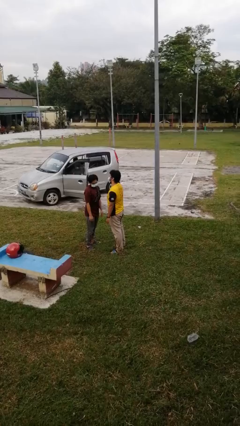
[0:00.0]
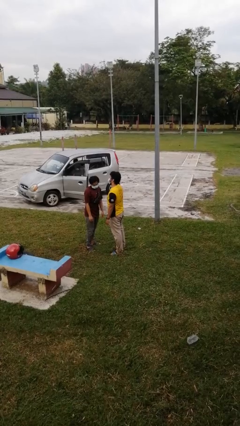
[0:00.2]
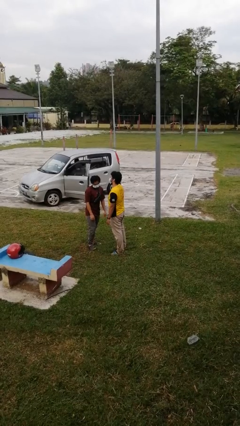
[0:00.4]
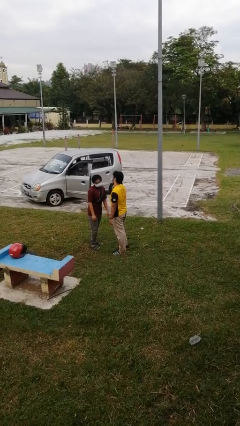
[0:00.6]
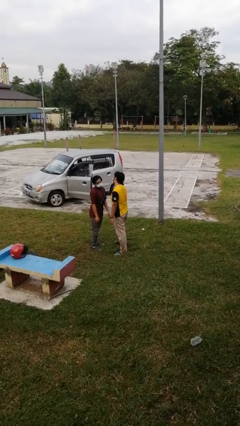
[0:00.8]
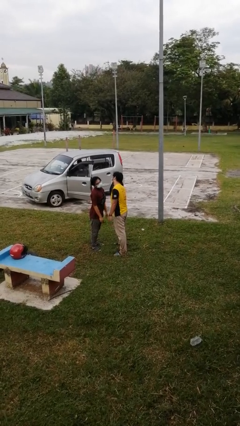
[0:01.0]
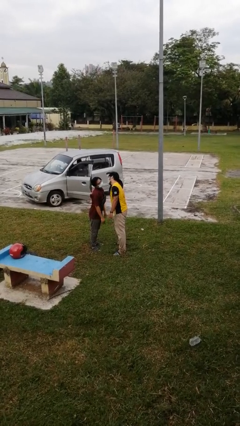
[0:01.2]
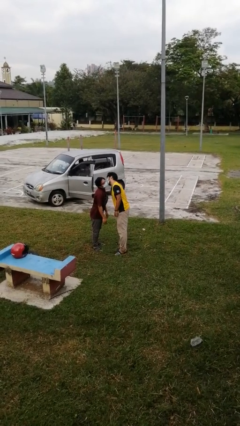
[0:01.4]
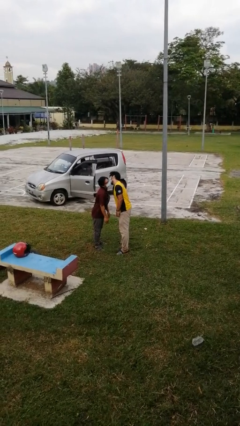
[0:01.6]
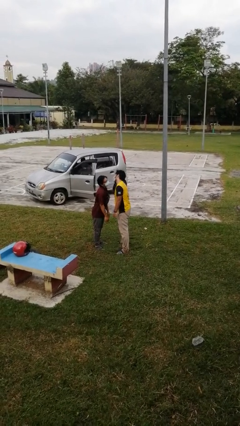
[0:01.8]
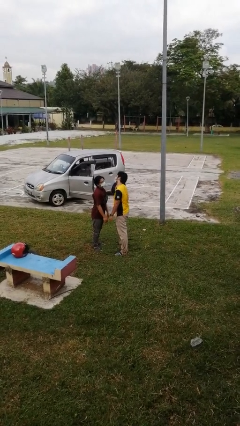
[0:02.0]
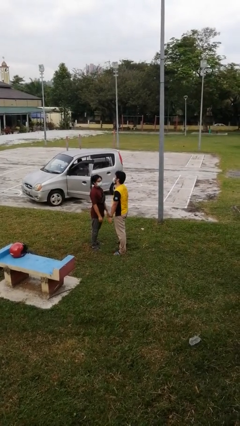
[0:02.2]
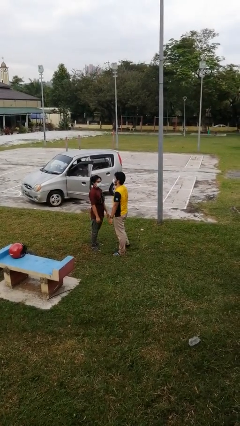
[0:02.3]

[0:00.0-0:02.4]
person kisses cheek of person

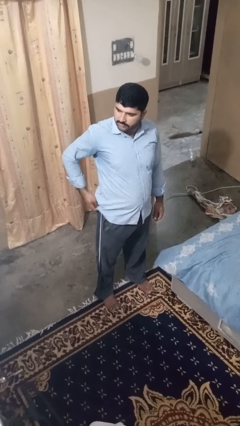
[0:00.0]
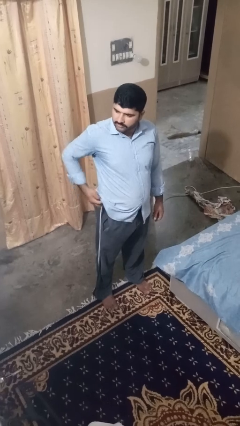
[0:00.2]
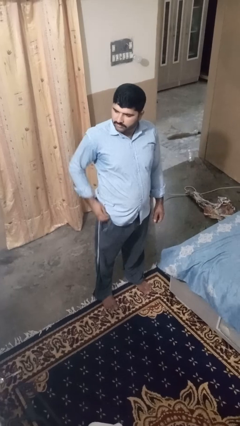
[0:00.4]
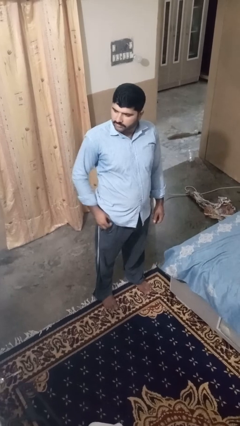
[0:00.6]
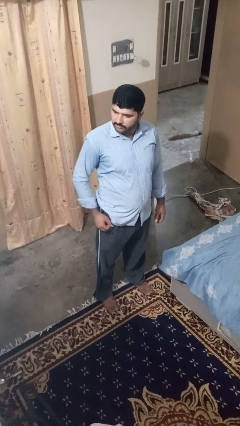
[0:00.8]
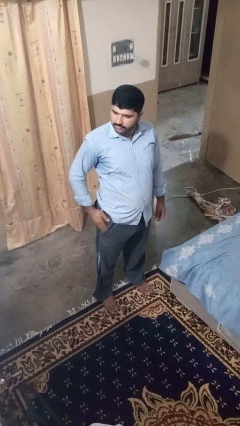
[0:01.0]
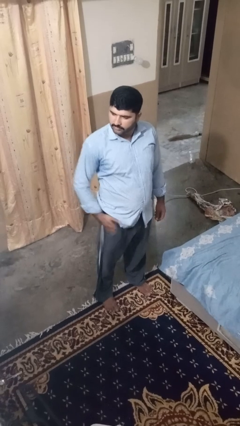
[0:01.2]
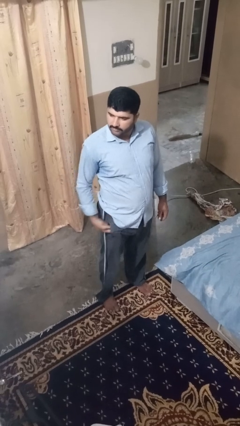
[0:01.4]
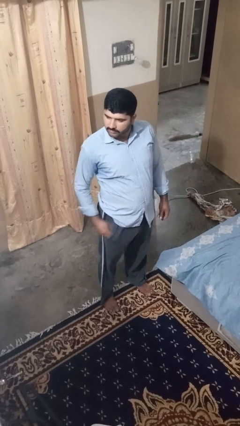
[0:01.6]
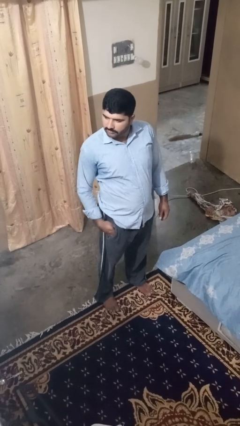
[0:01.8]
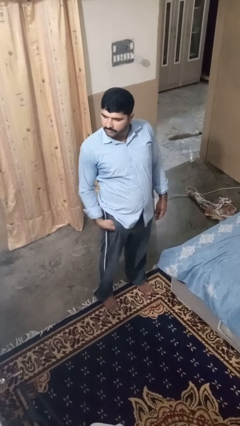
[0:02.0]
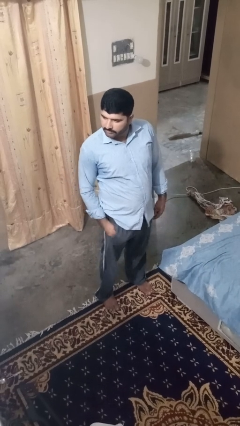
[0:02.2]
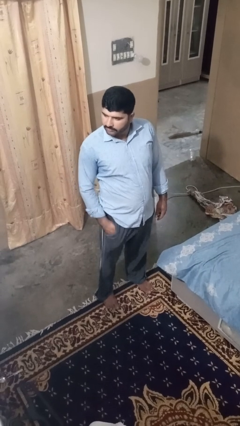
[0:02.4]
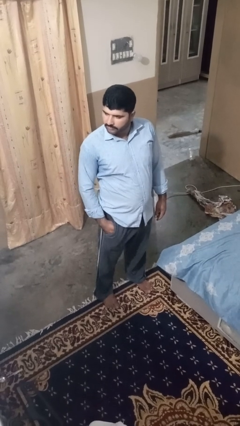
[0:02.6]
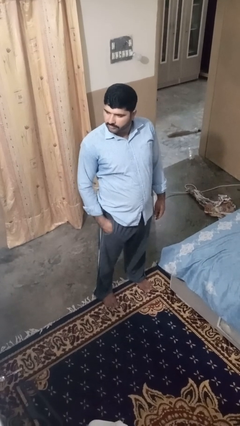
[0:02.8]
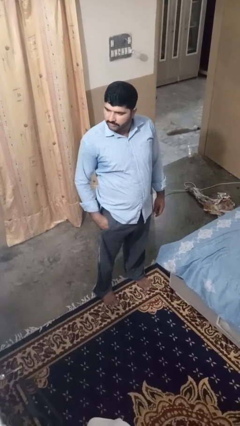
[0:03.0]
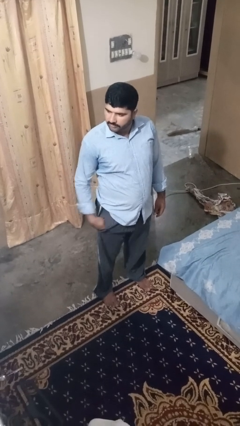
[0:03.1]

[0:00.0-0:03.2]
person puts hands in back pockets

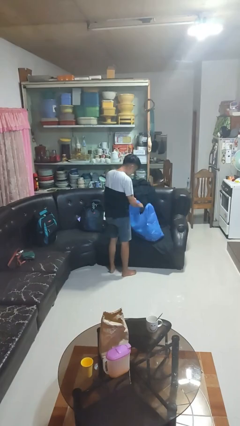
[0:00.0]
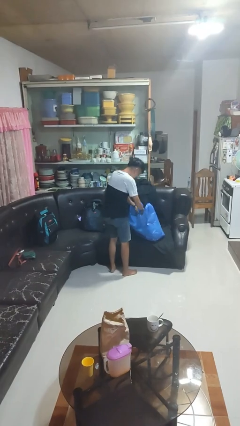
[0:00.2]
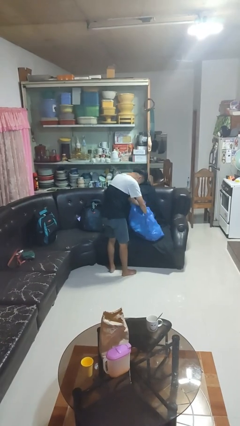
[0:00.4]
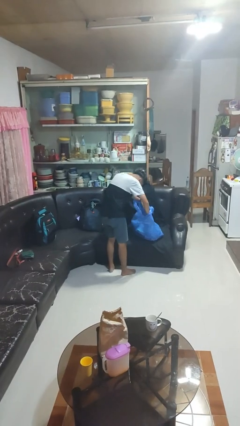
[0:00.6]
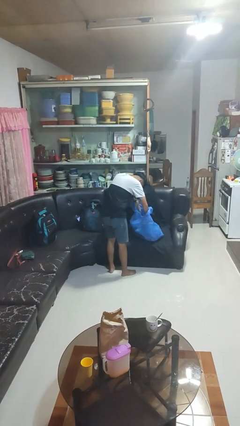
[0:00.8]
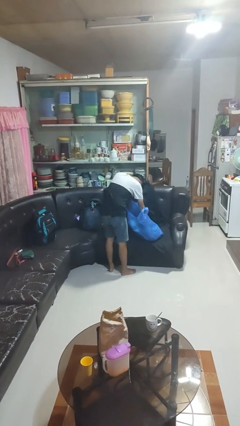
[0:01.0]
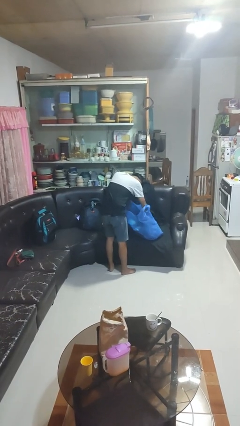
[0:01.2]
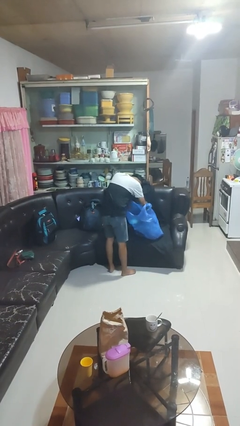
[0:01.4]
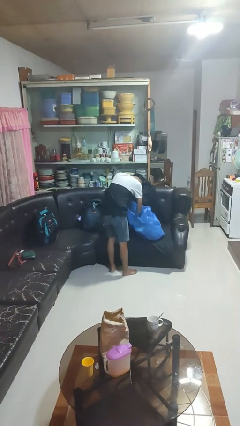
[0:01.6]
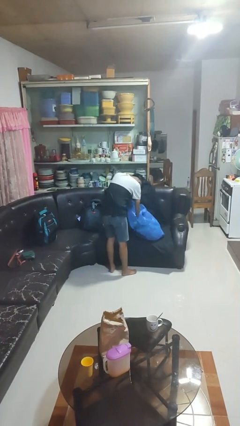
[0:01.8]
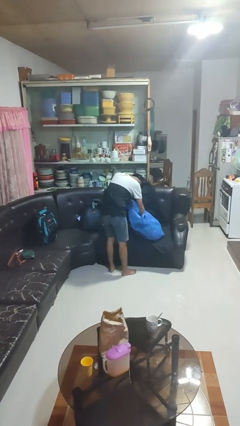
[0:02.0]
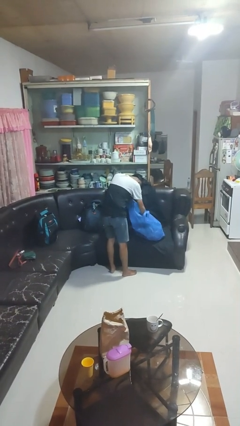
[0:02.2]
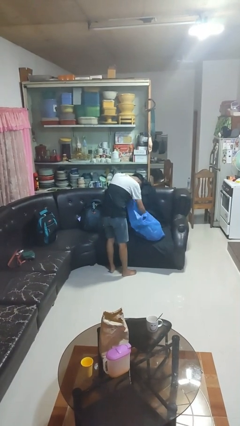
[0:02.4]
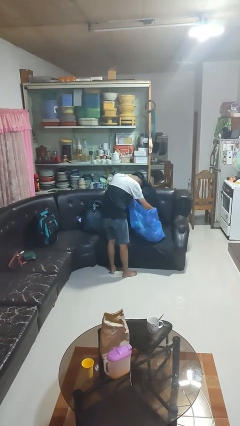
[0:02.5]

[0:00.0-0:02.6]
person searches in bag

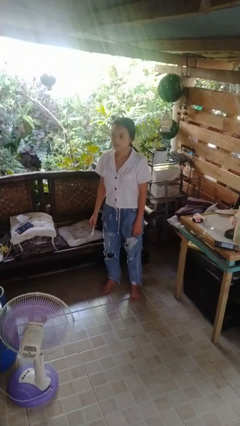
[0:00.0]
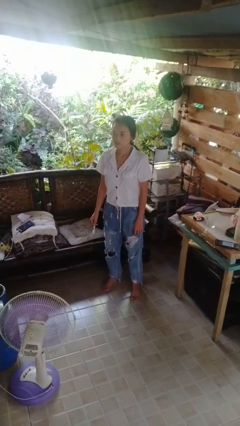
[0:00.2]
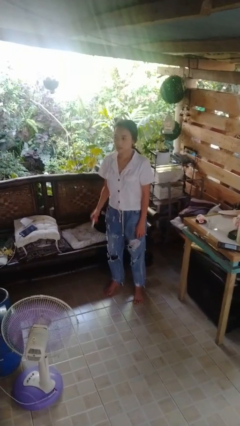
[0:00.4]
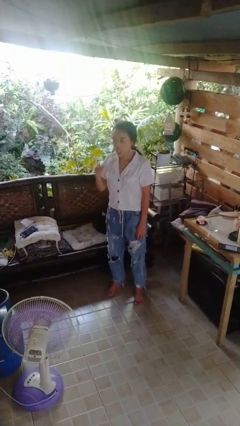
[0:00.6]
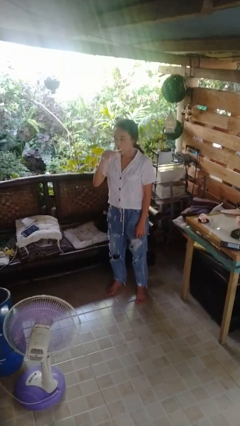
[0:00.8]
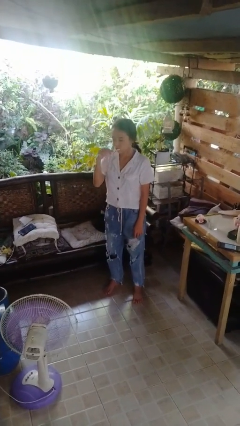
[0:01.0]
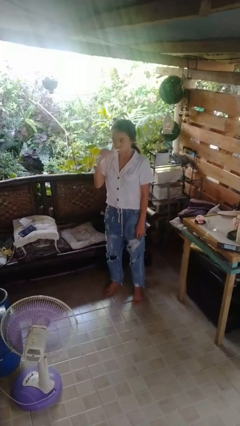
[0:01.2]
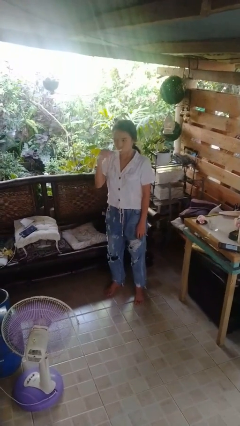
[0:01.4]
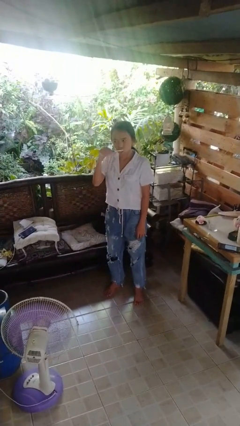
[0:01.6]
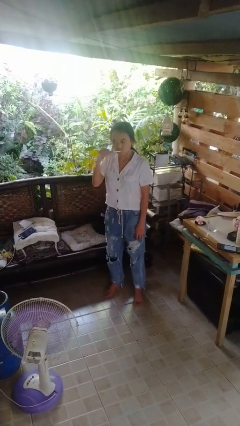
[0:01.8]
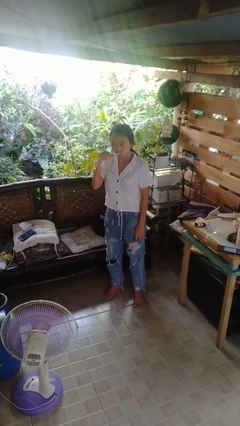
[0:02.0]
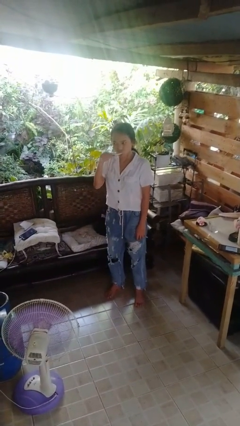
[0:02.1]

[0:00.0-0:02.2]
person brushes teeth

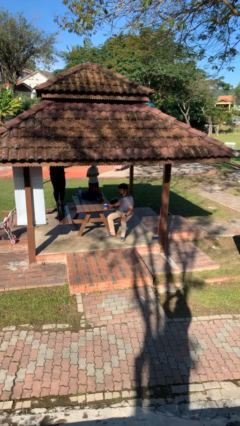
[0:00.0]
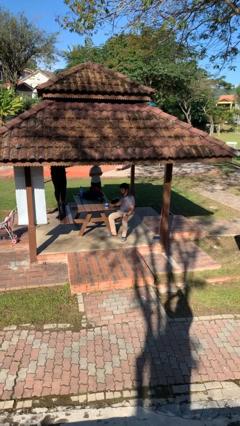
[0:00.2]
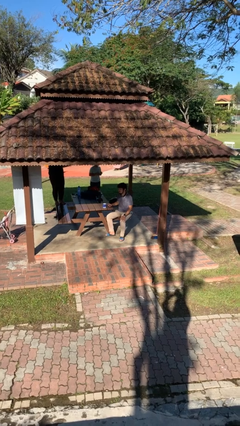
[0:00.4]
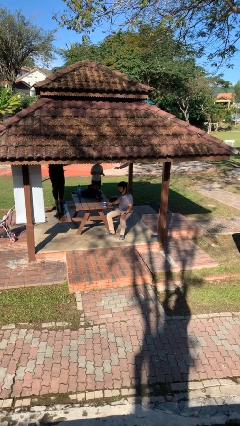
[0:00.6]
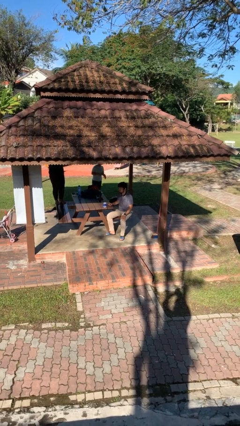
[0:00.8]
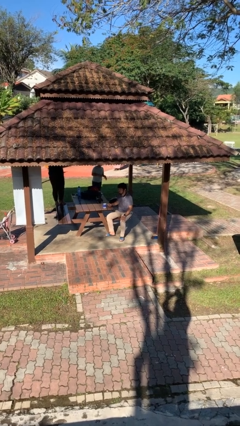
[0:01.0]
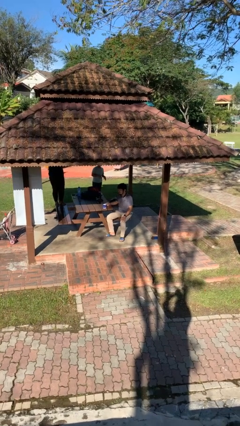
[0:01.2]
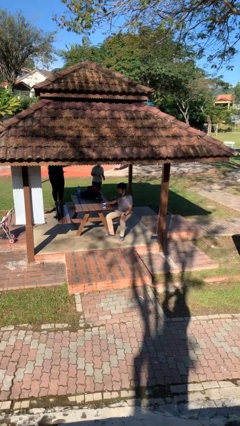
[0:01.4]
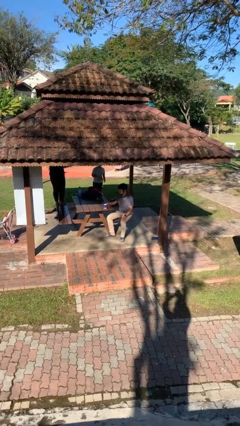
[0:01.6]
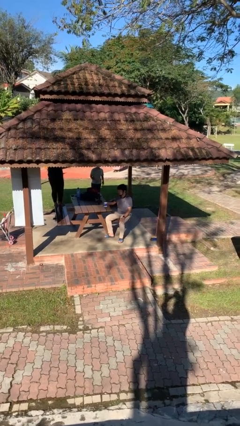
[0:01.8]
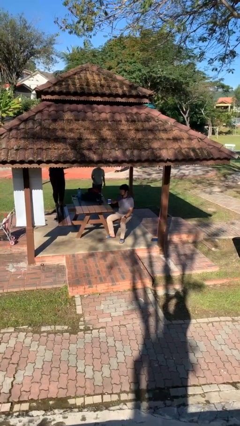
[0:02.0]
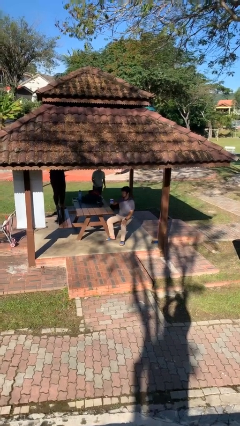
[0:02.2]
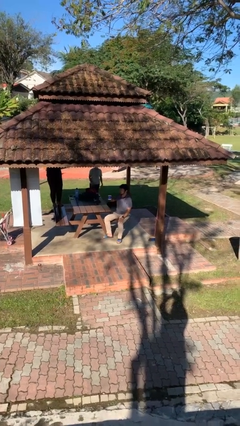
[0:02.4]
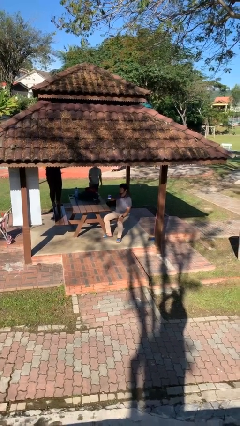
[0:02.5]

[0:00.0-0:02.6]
person picks up object from table

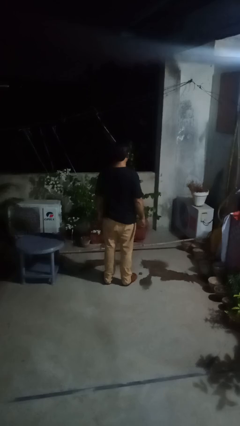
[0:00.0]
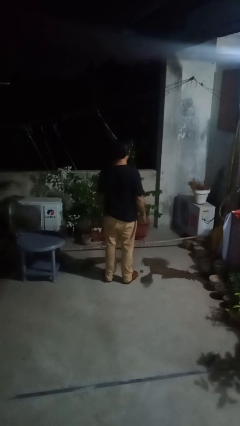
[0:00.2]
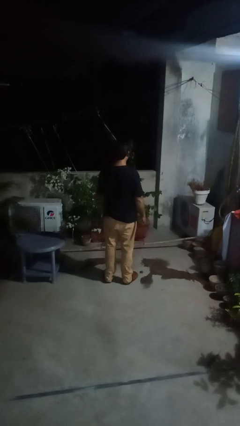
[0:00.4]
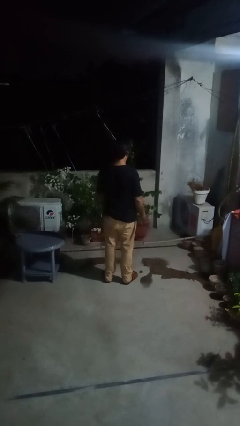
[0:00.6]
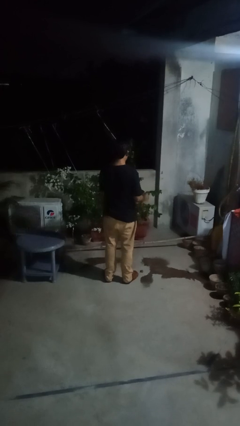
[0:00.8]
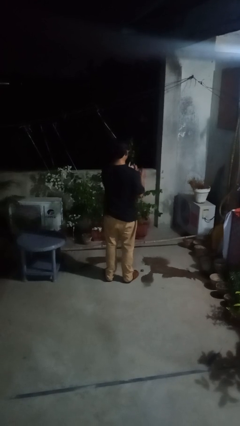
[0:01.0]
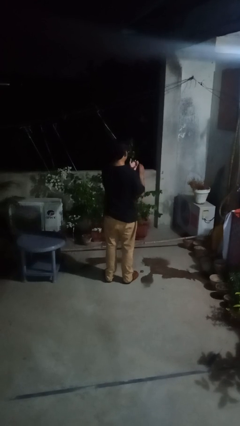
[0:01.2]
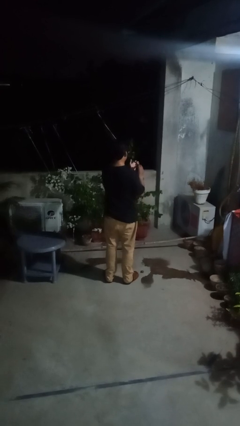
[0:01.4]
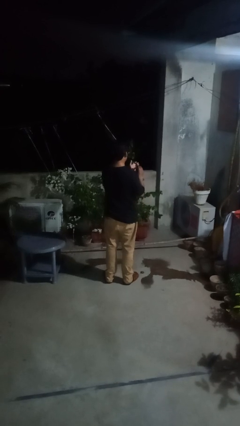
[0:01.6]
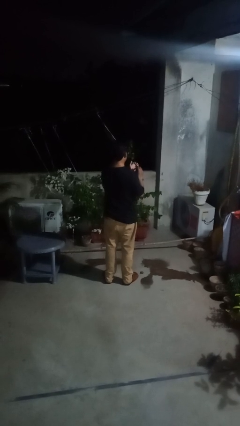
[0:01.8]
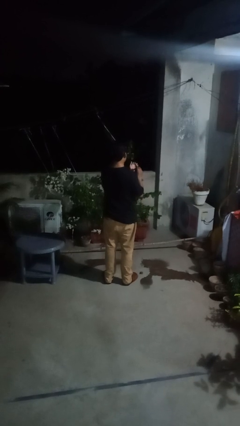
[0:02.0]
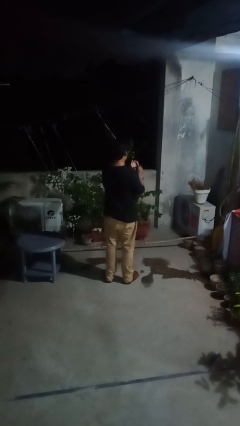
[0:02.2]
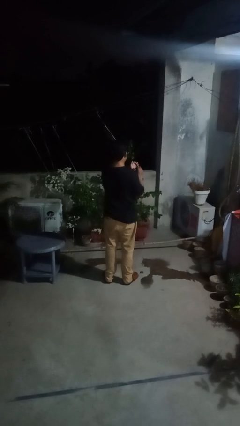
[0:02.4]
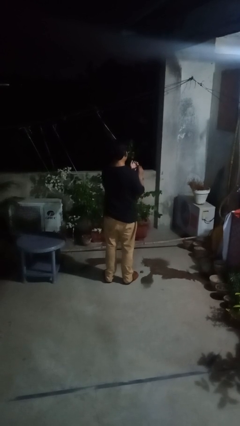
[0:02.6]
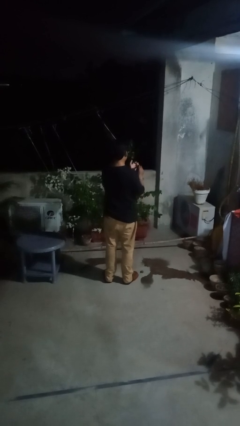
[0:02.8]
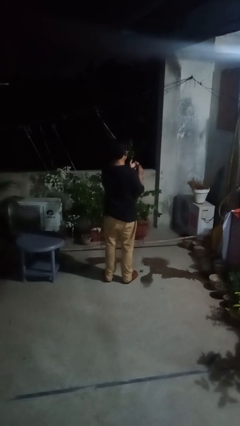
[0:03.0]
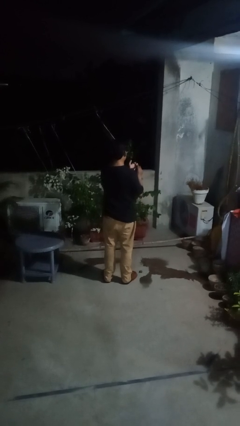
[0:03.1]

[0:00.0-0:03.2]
person clips fingernails

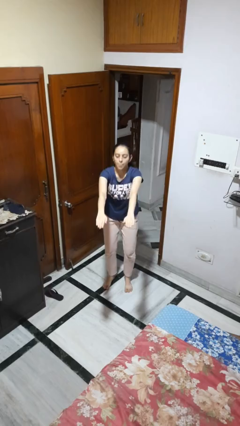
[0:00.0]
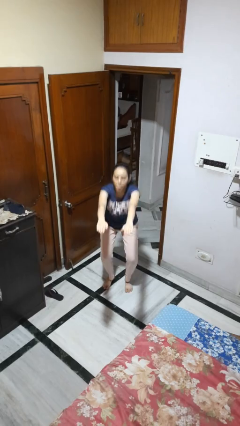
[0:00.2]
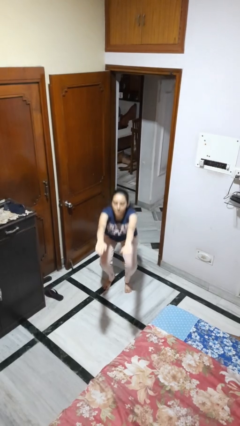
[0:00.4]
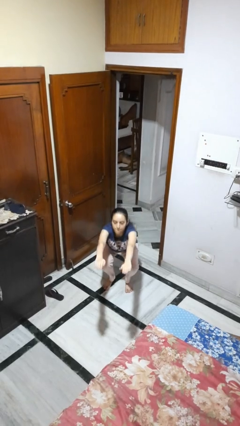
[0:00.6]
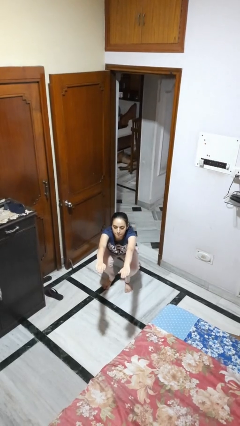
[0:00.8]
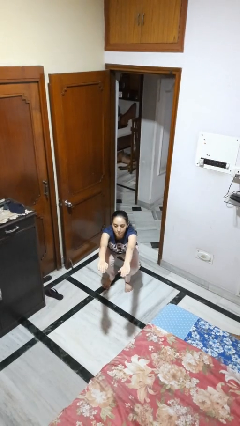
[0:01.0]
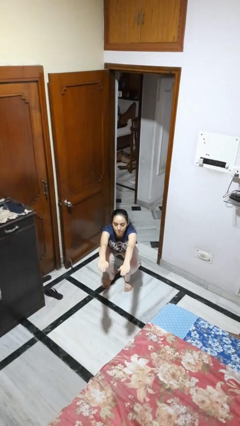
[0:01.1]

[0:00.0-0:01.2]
person squats
